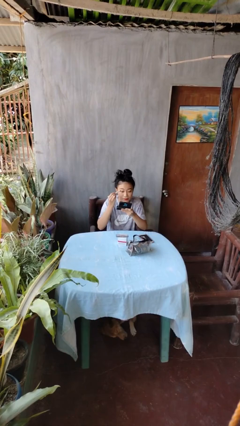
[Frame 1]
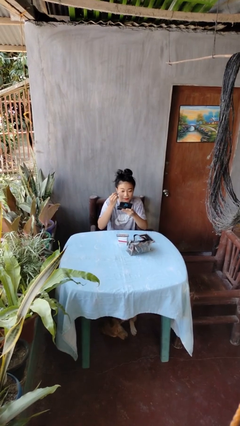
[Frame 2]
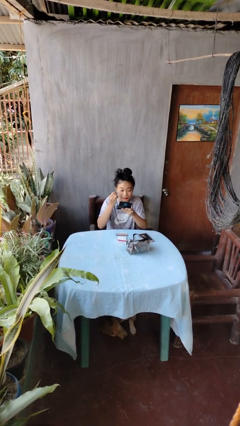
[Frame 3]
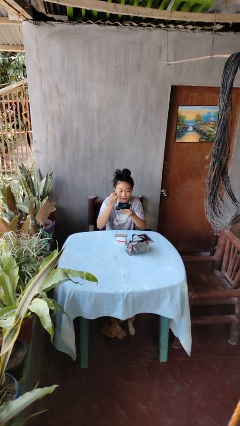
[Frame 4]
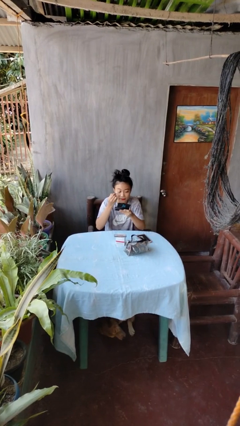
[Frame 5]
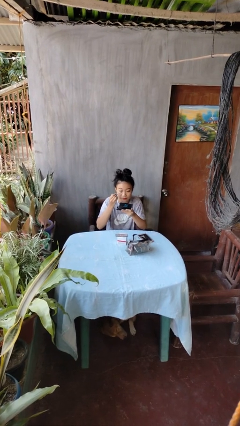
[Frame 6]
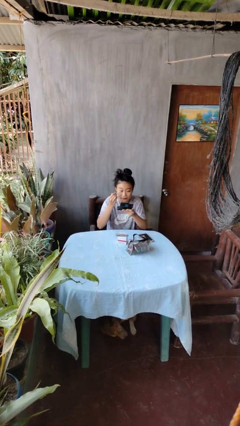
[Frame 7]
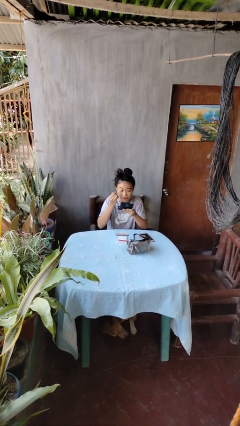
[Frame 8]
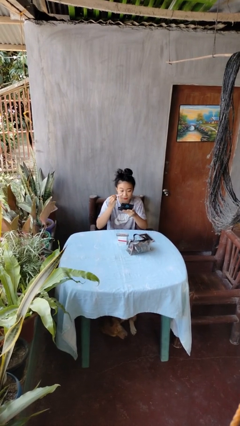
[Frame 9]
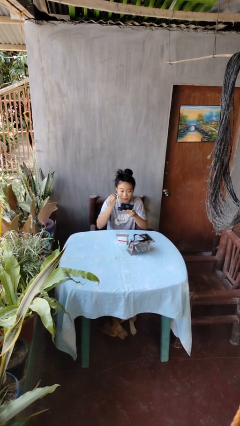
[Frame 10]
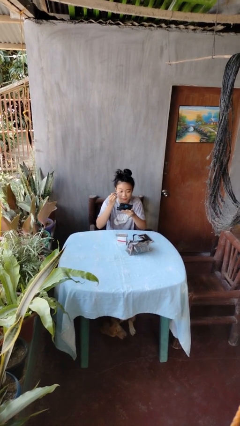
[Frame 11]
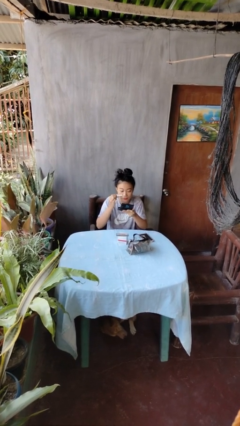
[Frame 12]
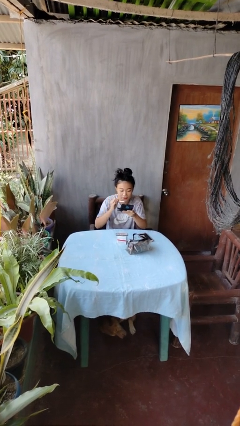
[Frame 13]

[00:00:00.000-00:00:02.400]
person applies eye makeup

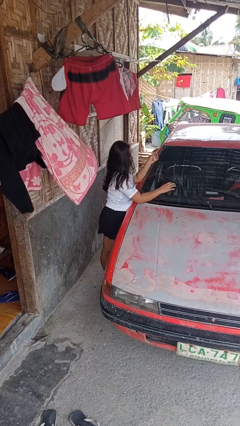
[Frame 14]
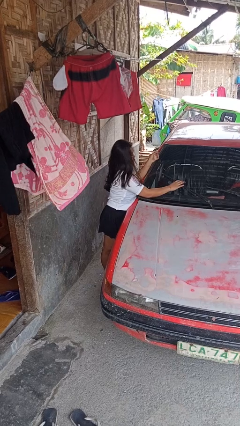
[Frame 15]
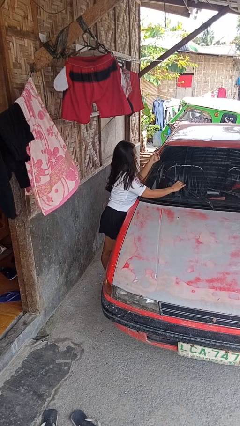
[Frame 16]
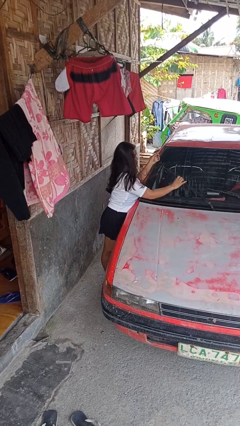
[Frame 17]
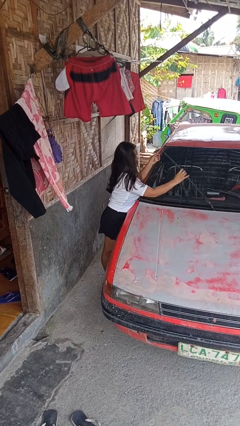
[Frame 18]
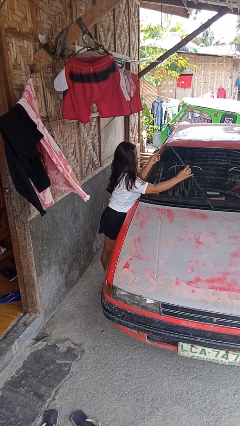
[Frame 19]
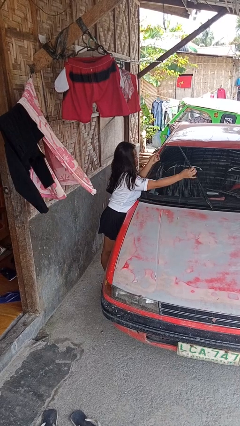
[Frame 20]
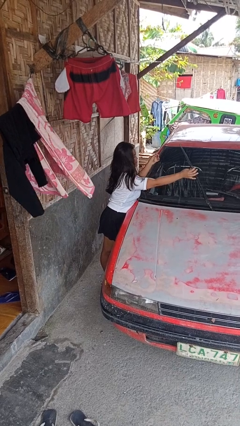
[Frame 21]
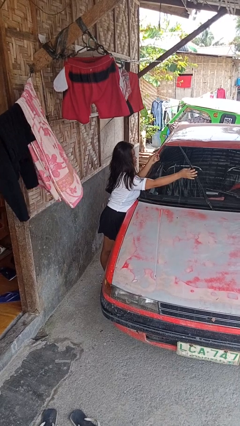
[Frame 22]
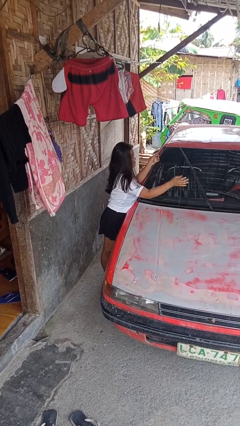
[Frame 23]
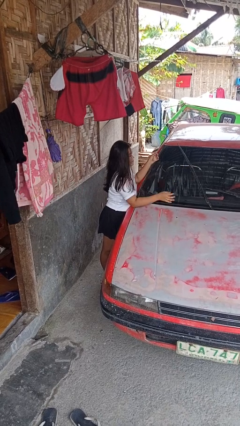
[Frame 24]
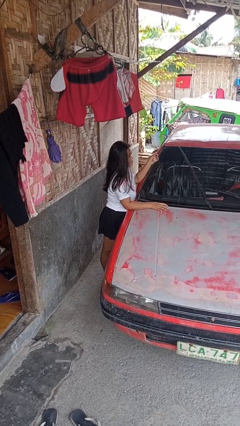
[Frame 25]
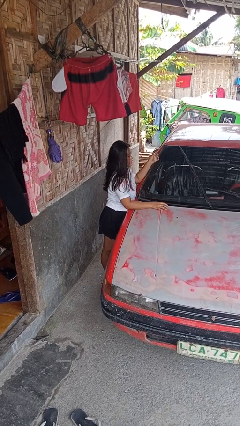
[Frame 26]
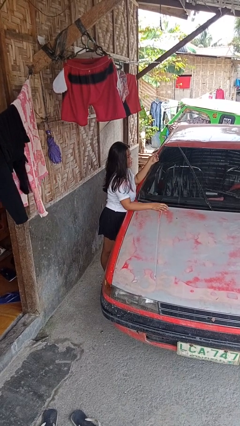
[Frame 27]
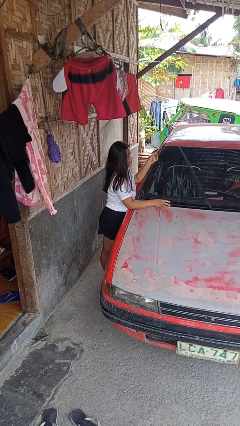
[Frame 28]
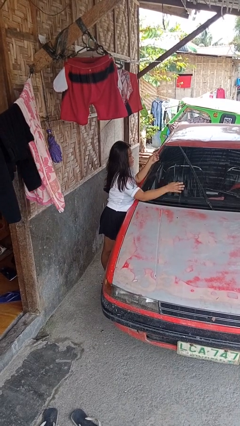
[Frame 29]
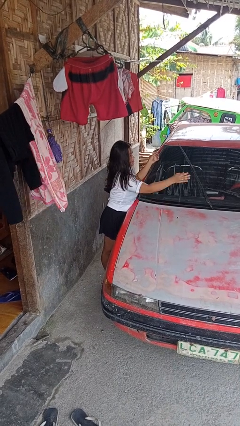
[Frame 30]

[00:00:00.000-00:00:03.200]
person flips up car wipers

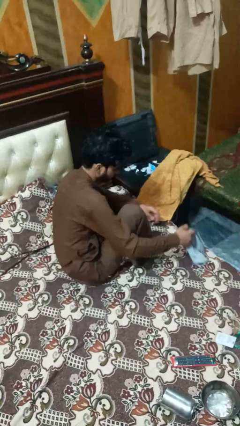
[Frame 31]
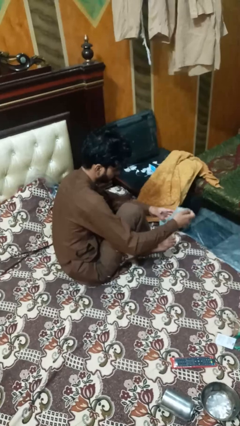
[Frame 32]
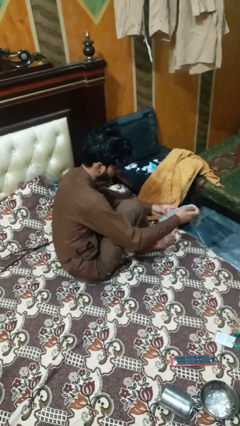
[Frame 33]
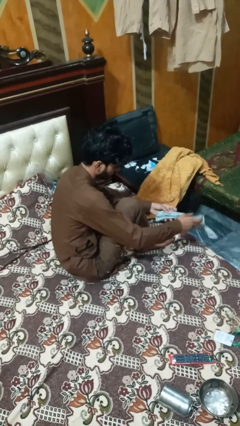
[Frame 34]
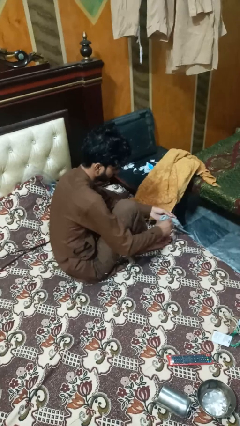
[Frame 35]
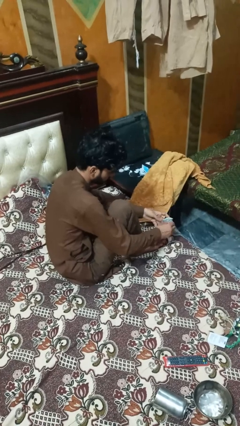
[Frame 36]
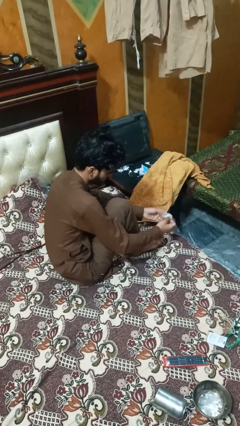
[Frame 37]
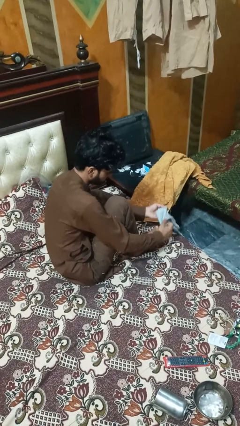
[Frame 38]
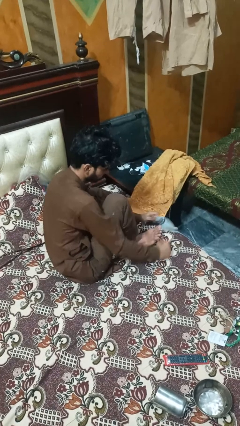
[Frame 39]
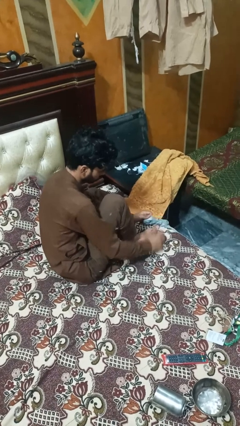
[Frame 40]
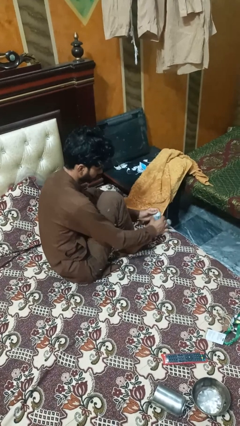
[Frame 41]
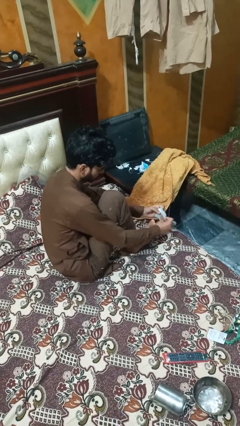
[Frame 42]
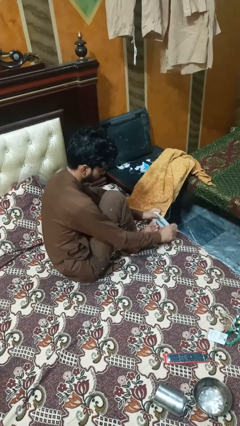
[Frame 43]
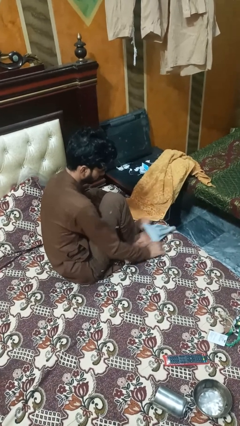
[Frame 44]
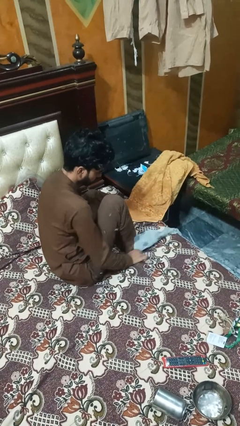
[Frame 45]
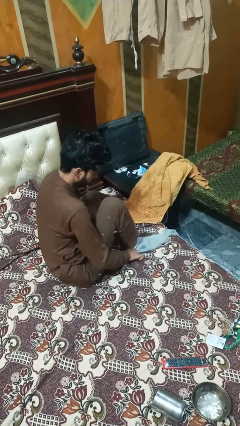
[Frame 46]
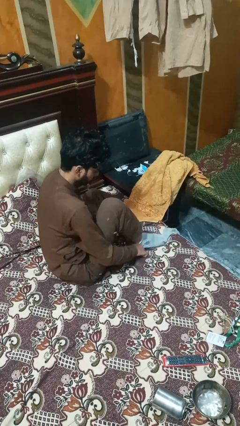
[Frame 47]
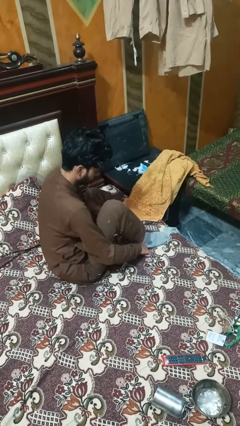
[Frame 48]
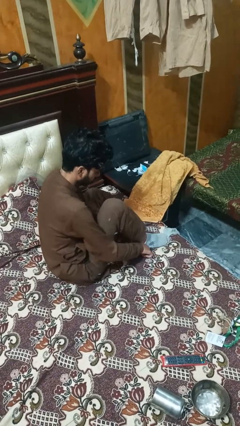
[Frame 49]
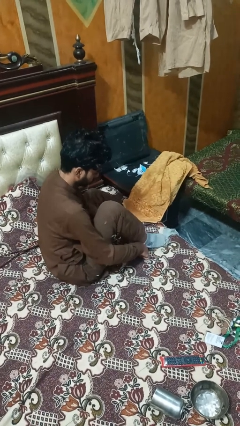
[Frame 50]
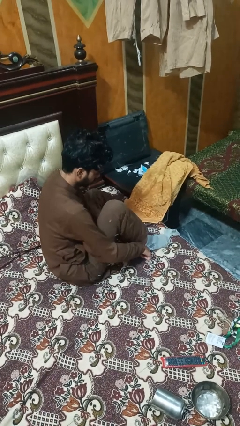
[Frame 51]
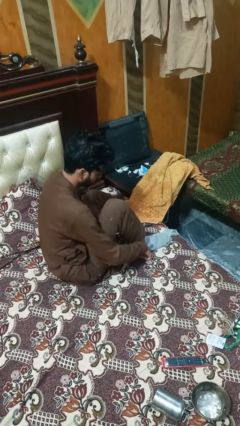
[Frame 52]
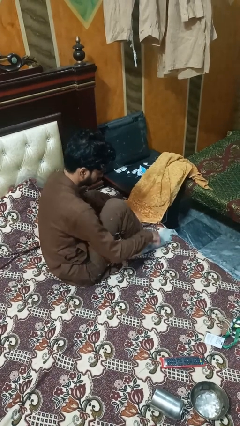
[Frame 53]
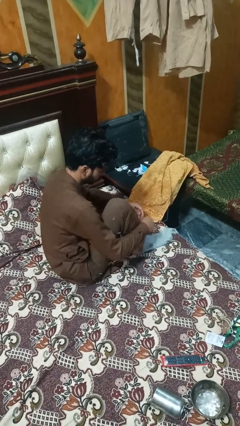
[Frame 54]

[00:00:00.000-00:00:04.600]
person puts on socks

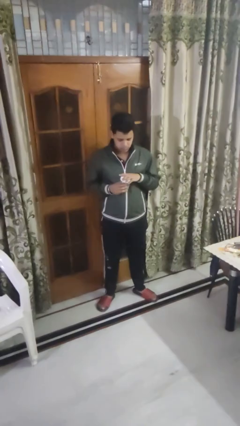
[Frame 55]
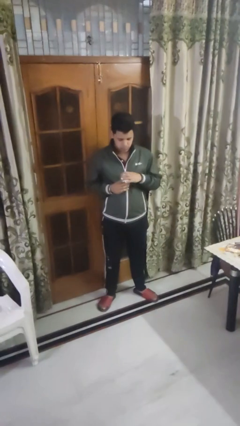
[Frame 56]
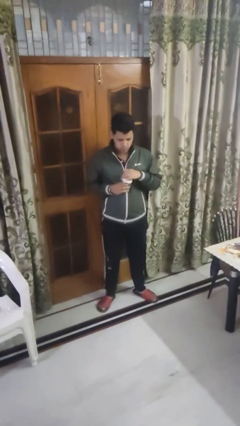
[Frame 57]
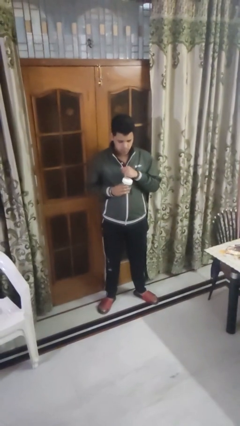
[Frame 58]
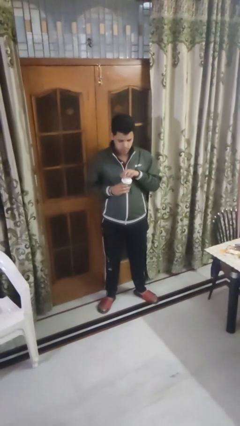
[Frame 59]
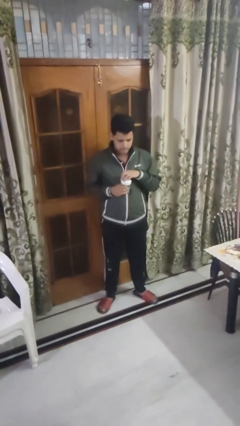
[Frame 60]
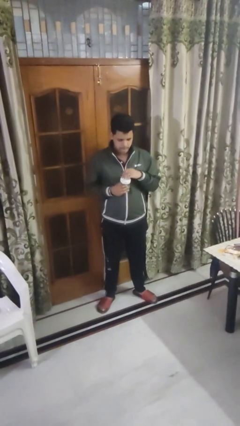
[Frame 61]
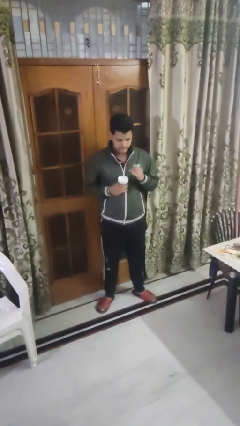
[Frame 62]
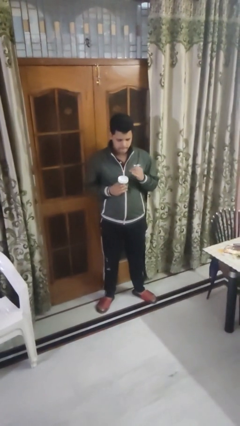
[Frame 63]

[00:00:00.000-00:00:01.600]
person closes jar

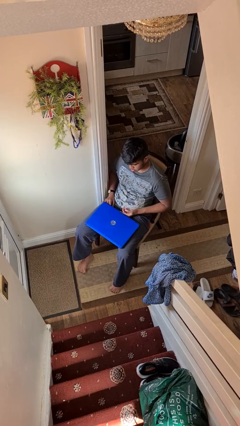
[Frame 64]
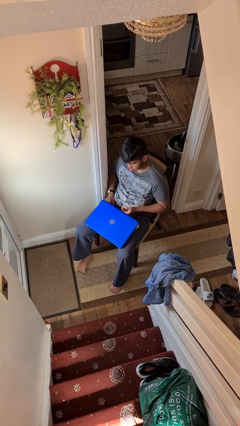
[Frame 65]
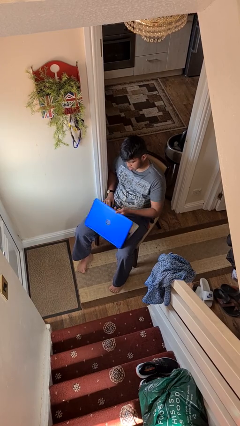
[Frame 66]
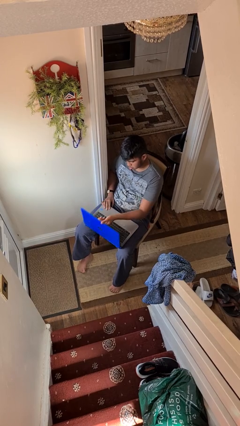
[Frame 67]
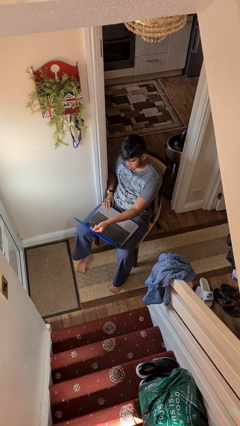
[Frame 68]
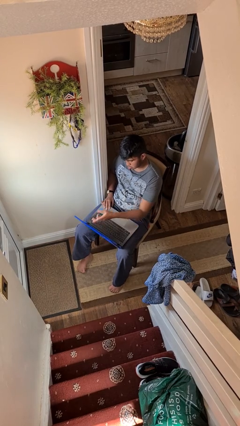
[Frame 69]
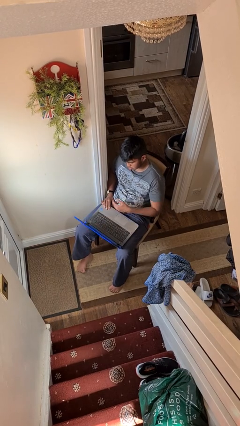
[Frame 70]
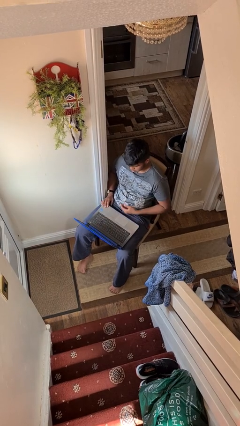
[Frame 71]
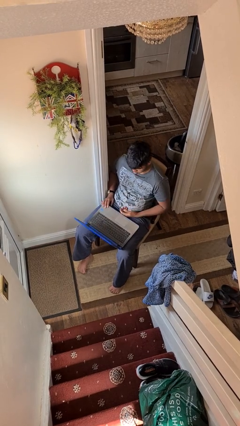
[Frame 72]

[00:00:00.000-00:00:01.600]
person opens laptop

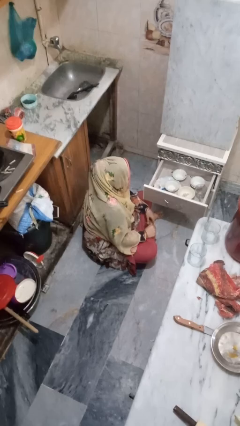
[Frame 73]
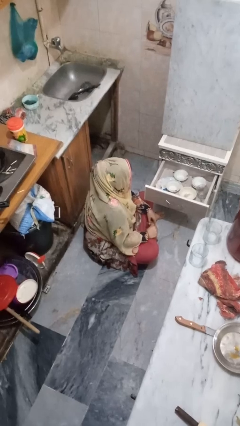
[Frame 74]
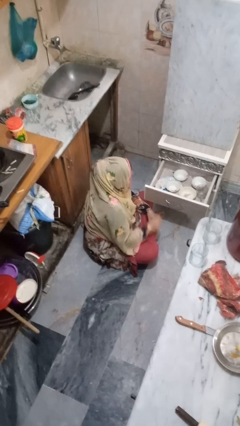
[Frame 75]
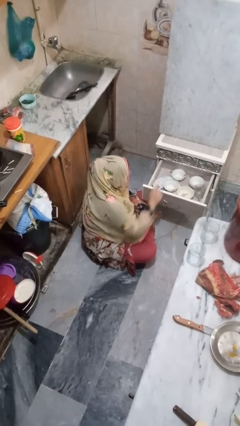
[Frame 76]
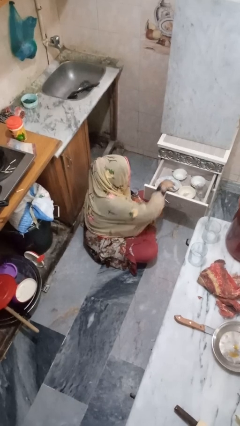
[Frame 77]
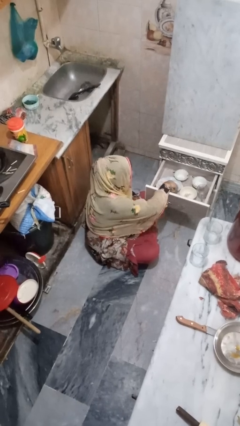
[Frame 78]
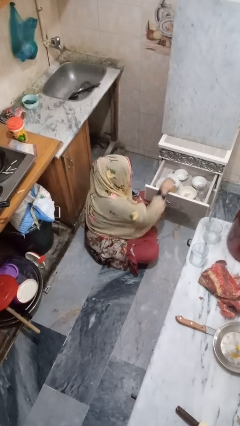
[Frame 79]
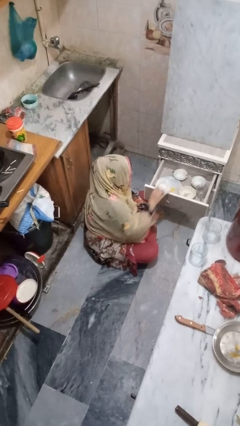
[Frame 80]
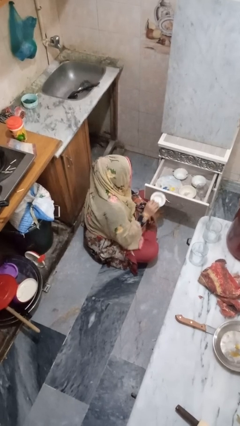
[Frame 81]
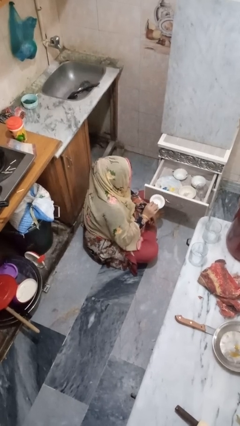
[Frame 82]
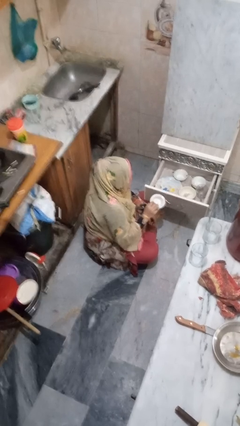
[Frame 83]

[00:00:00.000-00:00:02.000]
person takes object from kitchen drawer

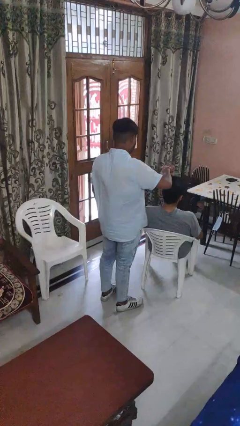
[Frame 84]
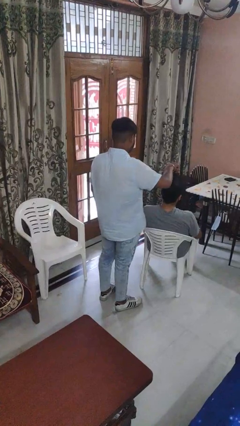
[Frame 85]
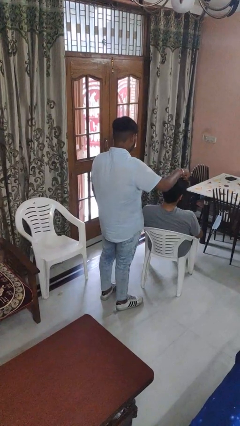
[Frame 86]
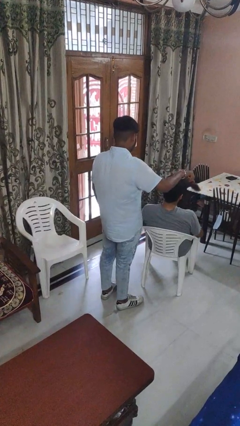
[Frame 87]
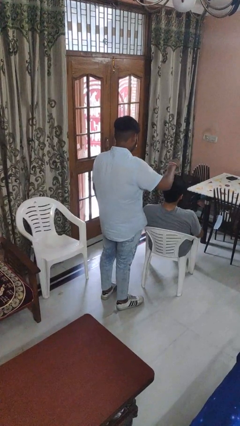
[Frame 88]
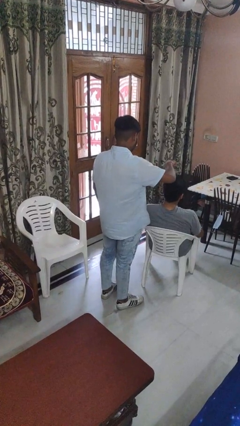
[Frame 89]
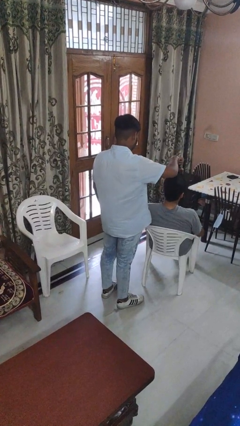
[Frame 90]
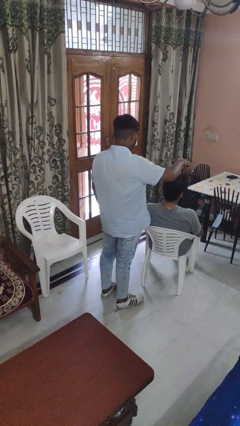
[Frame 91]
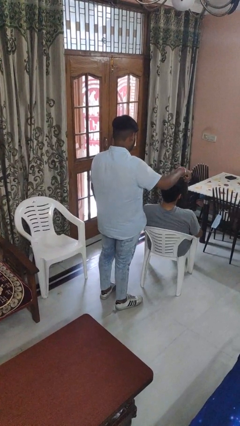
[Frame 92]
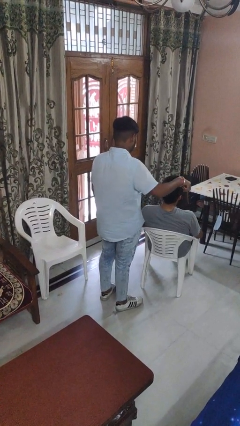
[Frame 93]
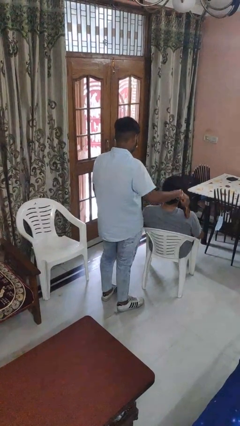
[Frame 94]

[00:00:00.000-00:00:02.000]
person brushes hair of person
